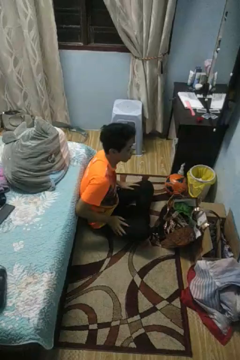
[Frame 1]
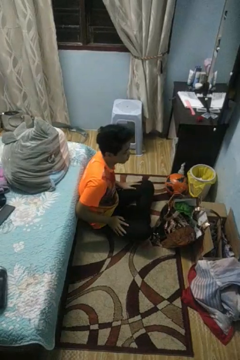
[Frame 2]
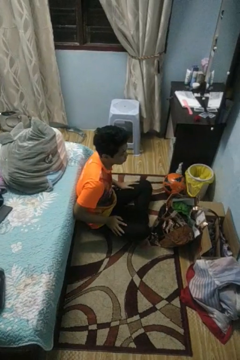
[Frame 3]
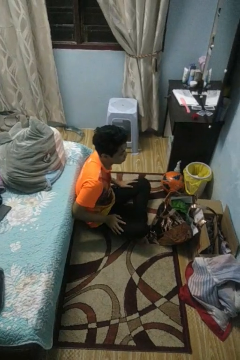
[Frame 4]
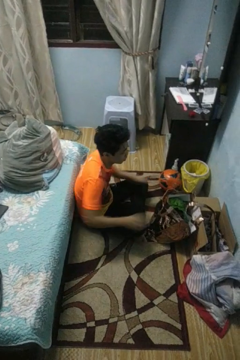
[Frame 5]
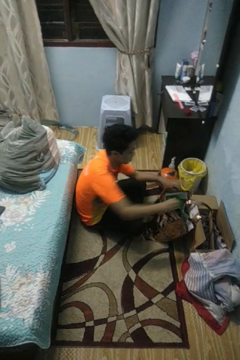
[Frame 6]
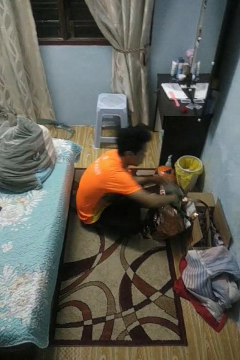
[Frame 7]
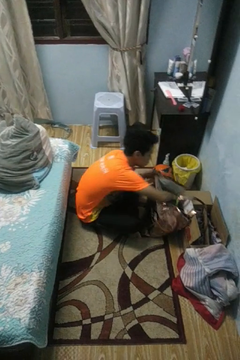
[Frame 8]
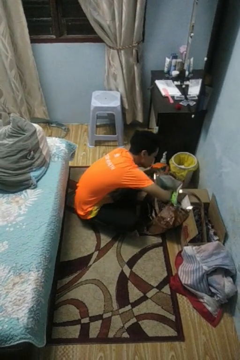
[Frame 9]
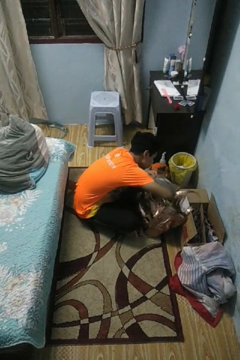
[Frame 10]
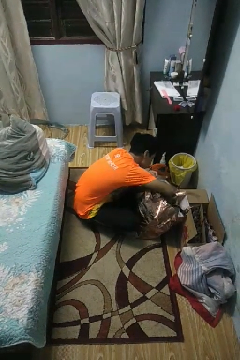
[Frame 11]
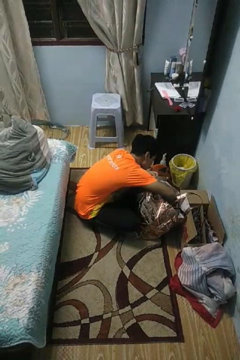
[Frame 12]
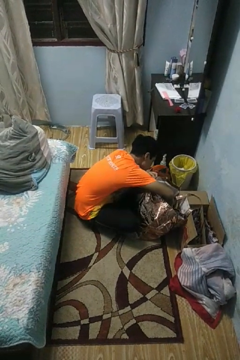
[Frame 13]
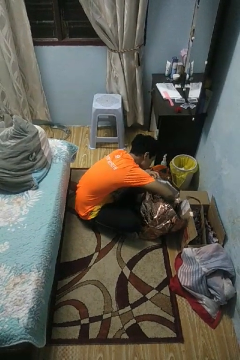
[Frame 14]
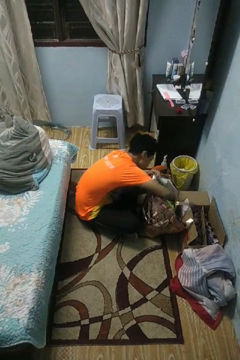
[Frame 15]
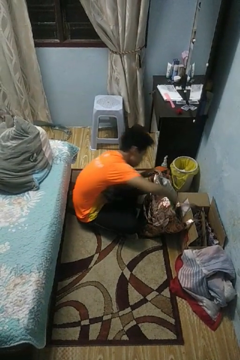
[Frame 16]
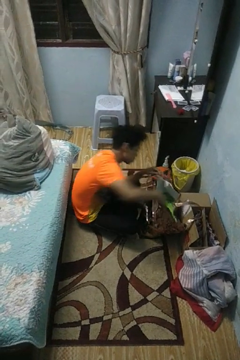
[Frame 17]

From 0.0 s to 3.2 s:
person searches in bag

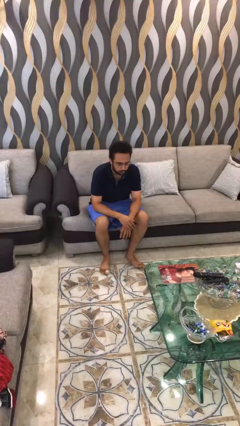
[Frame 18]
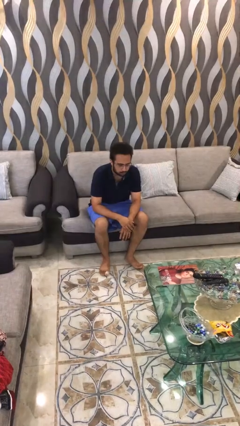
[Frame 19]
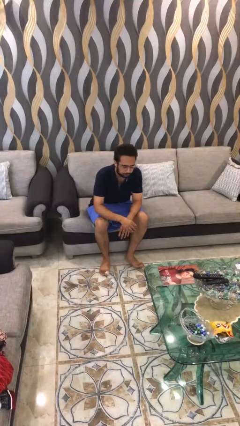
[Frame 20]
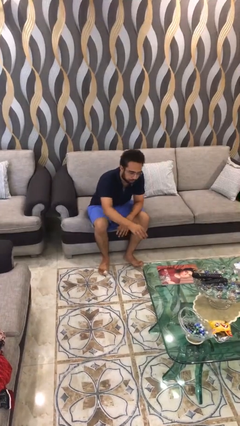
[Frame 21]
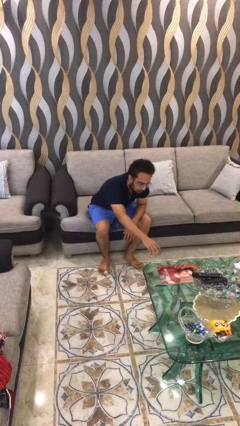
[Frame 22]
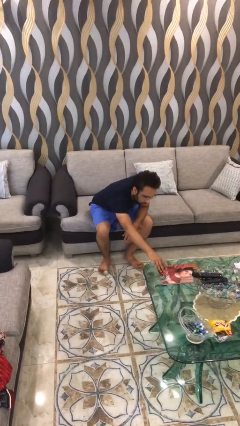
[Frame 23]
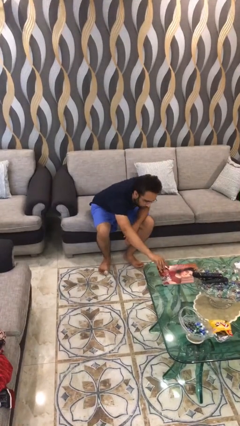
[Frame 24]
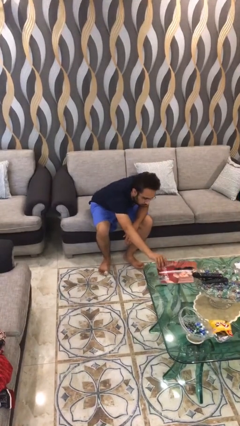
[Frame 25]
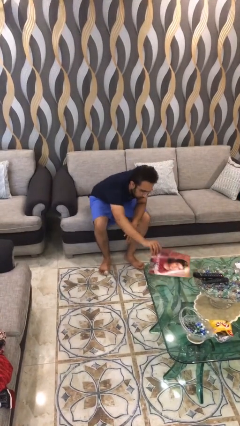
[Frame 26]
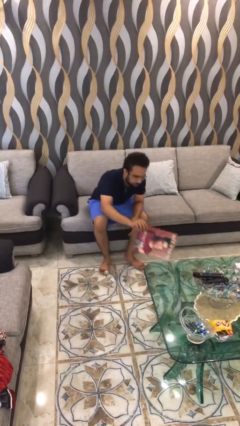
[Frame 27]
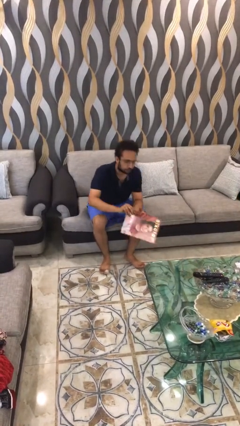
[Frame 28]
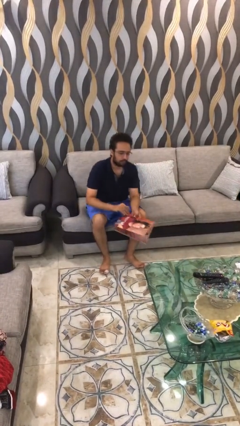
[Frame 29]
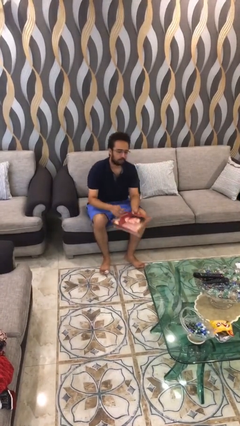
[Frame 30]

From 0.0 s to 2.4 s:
person picks up object from table

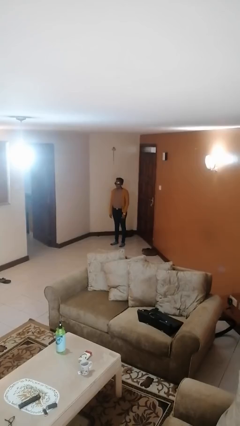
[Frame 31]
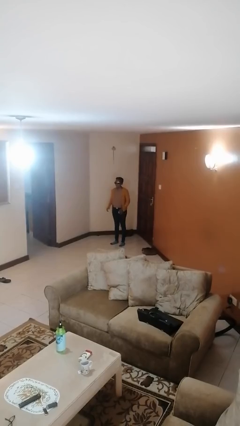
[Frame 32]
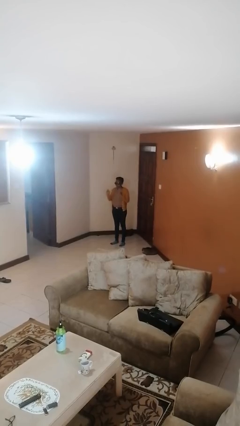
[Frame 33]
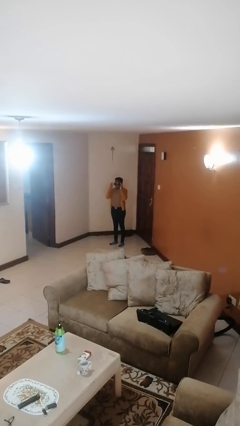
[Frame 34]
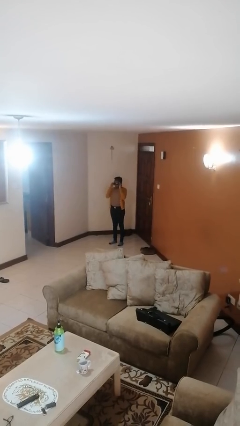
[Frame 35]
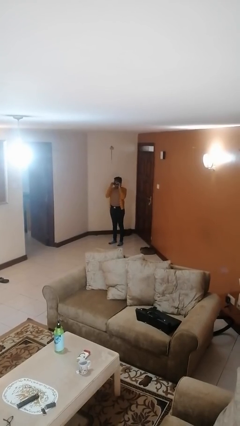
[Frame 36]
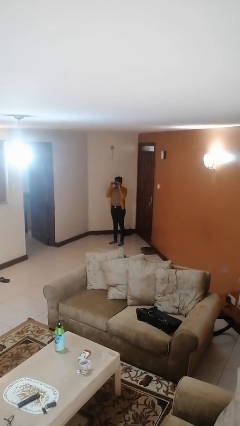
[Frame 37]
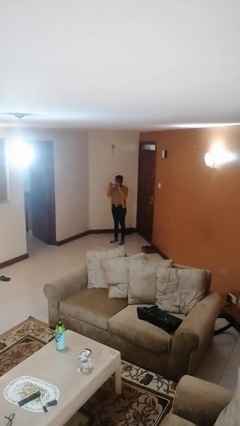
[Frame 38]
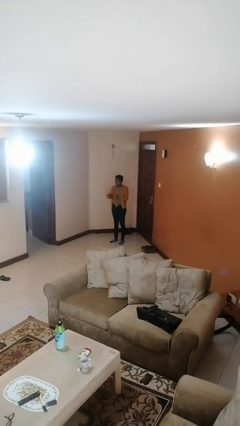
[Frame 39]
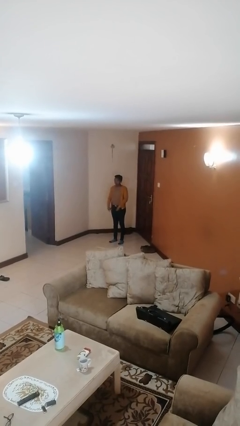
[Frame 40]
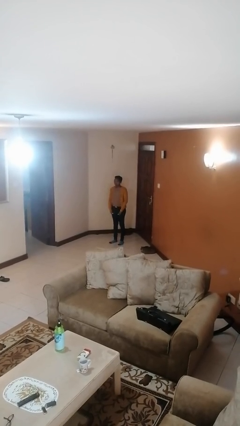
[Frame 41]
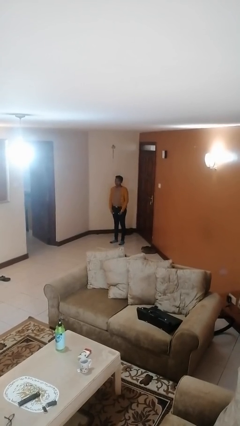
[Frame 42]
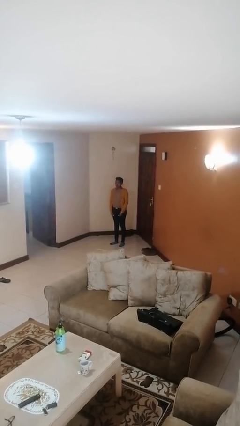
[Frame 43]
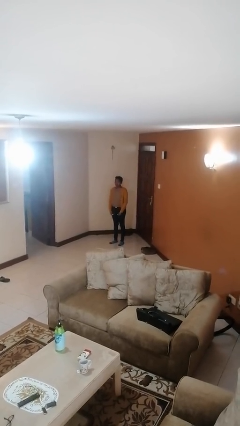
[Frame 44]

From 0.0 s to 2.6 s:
person takes off sunglasses

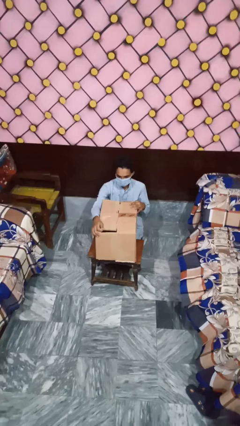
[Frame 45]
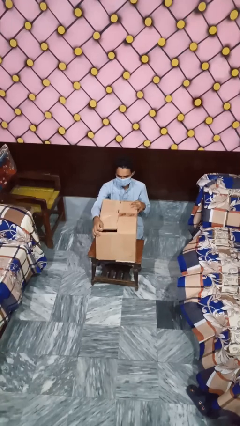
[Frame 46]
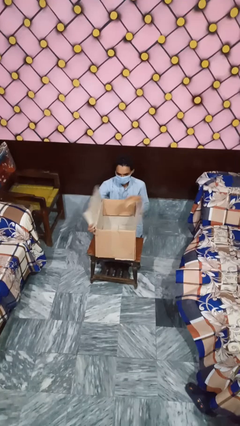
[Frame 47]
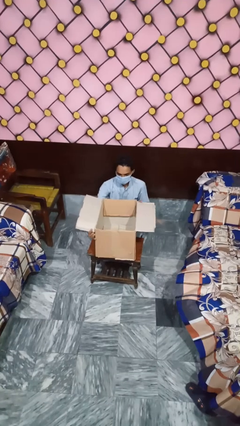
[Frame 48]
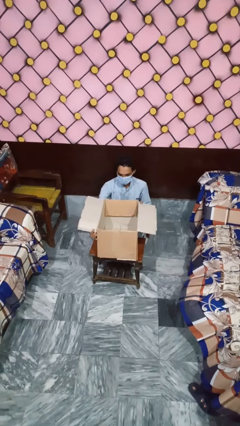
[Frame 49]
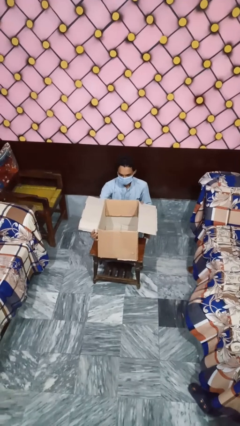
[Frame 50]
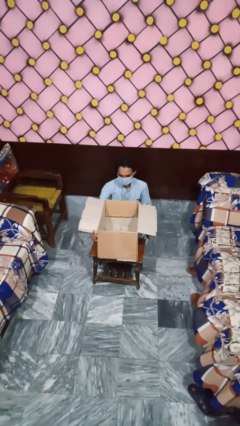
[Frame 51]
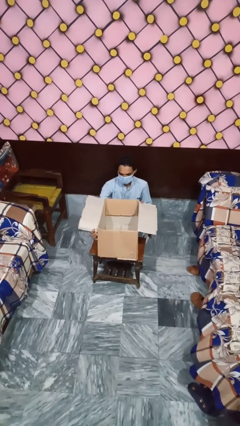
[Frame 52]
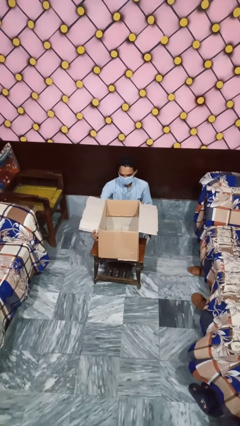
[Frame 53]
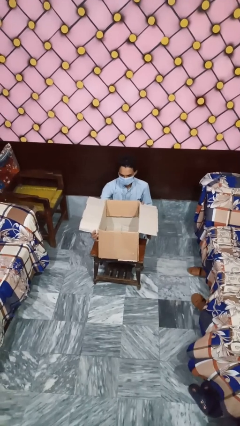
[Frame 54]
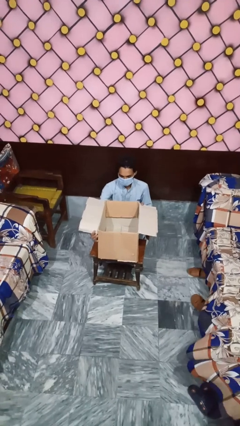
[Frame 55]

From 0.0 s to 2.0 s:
person opens box

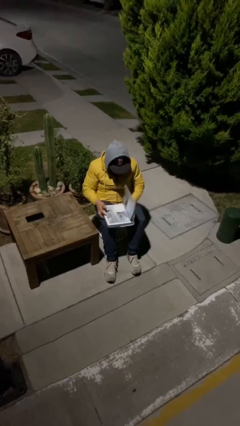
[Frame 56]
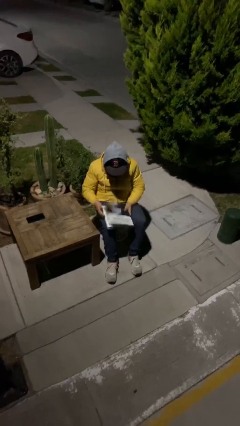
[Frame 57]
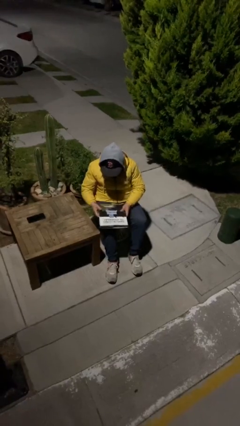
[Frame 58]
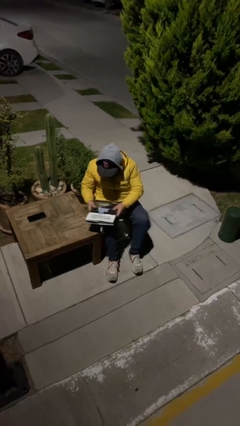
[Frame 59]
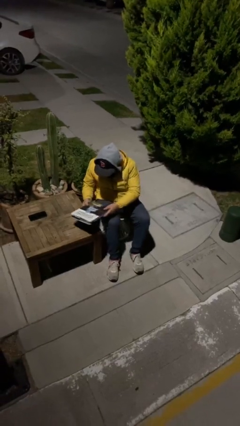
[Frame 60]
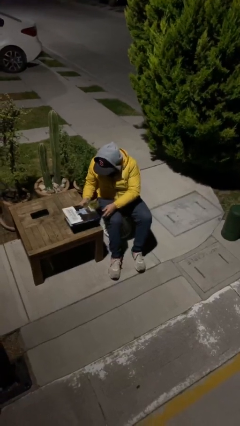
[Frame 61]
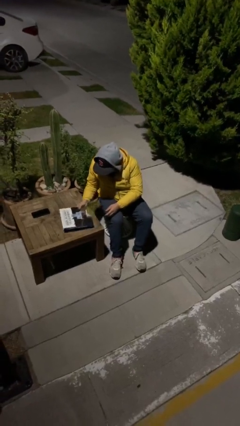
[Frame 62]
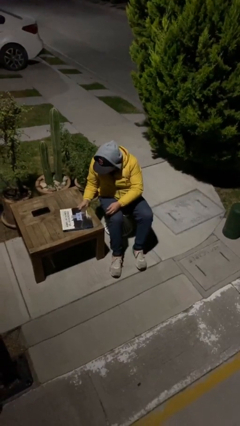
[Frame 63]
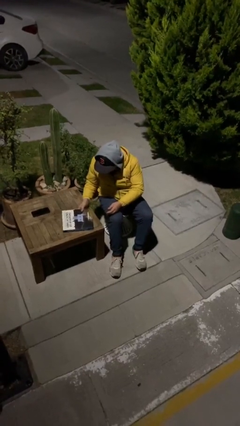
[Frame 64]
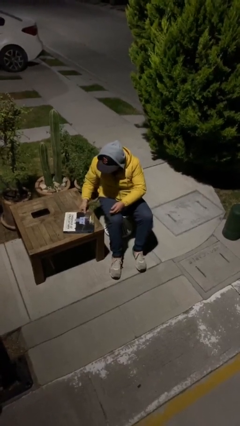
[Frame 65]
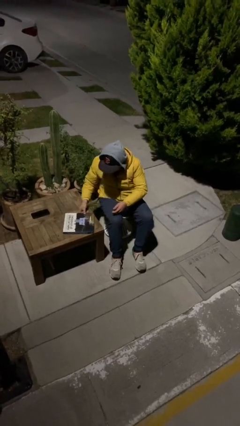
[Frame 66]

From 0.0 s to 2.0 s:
person puts down object on table

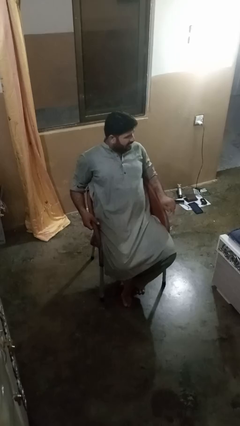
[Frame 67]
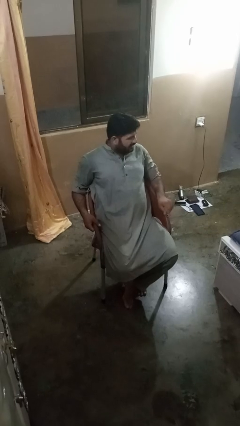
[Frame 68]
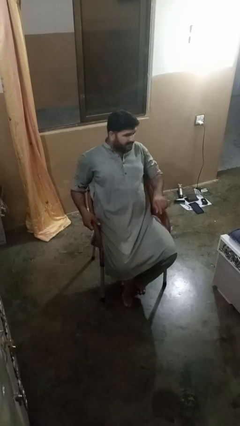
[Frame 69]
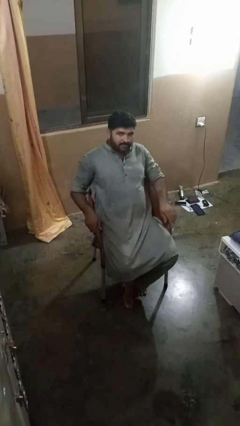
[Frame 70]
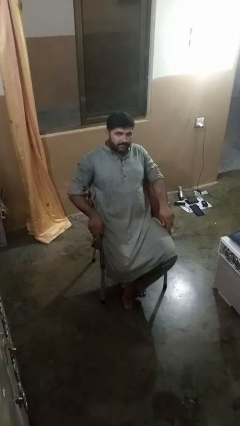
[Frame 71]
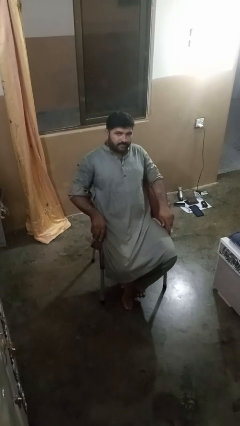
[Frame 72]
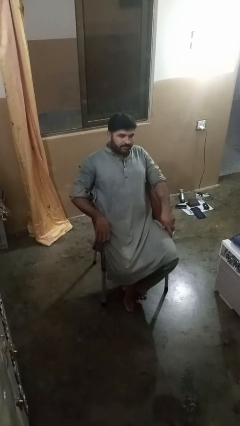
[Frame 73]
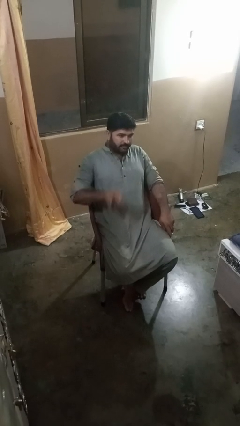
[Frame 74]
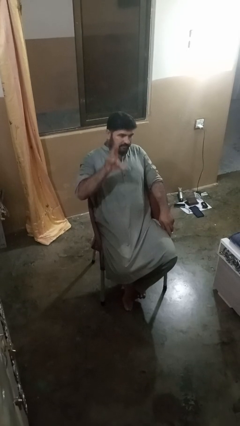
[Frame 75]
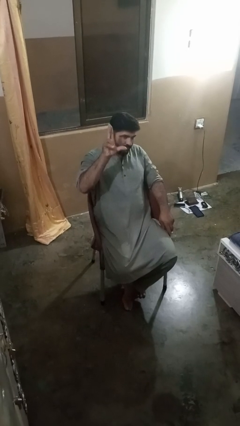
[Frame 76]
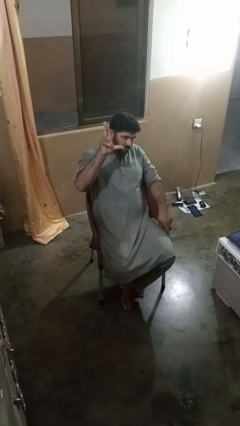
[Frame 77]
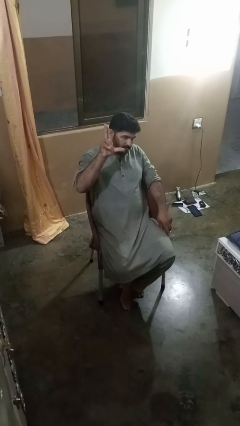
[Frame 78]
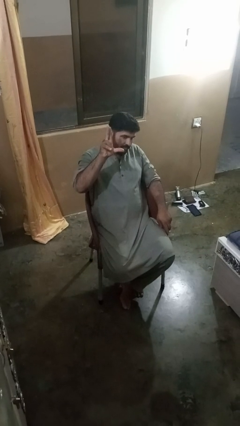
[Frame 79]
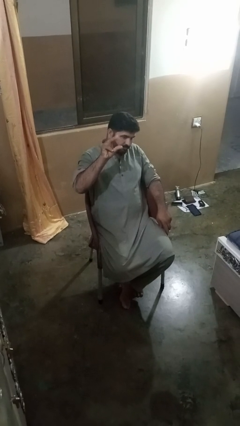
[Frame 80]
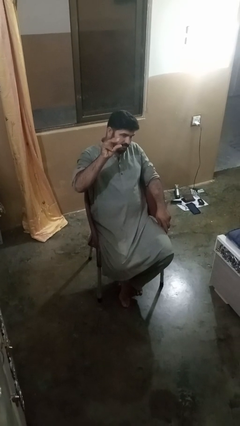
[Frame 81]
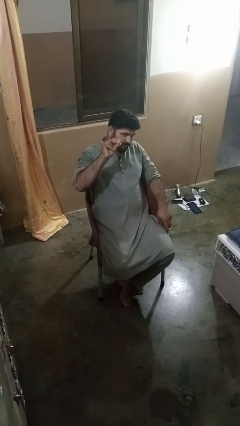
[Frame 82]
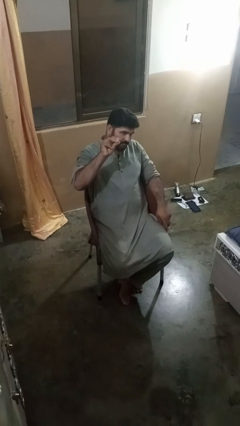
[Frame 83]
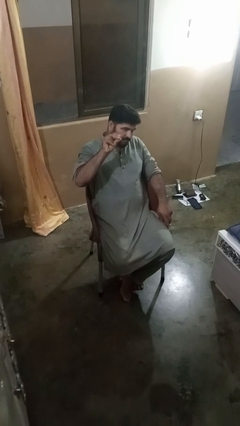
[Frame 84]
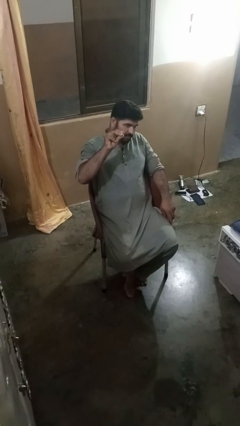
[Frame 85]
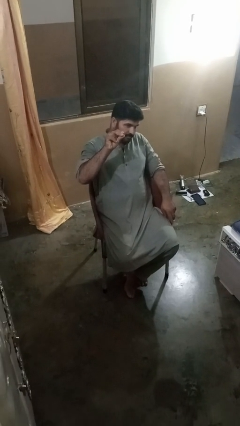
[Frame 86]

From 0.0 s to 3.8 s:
person gestures zoom in

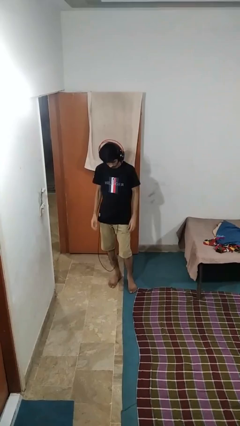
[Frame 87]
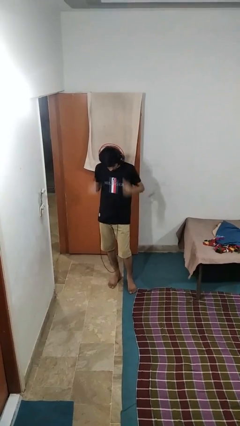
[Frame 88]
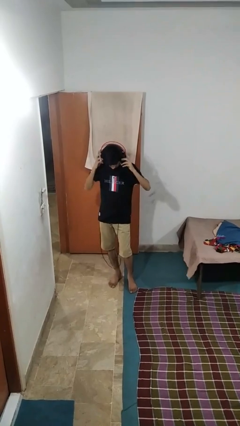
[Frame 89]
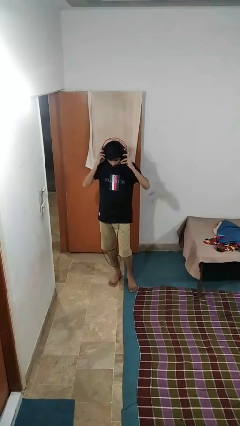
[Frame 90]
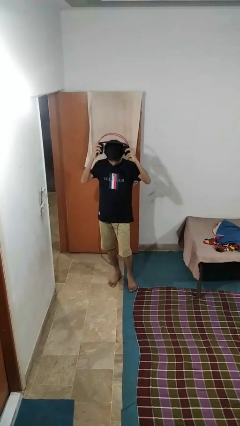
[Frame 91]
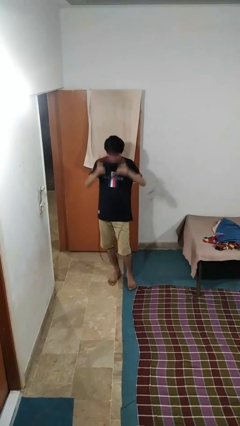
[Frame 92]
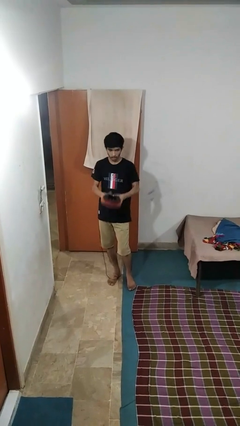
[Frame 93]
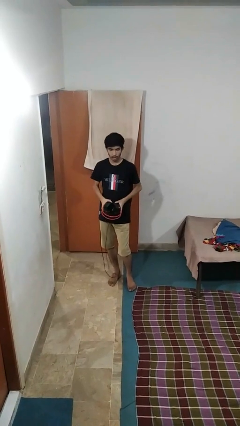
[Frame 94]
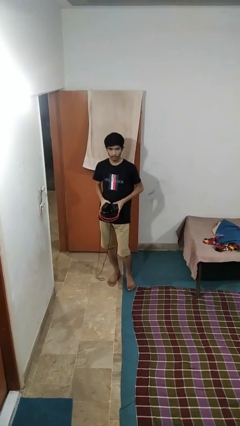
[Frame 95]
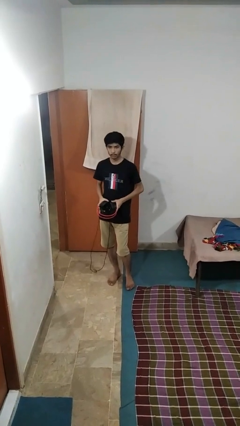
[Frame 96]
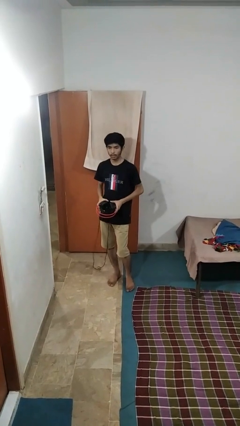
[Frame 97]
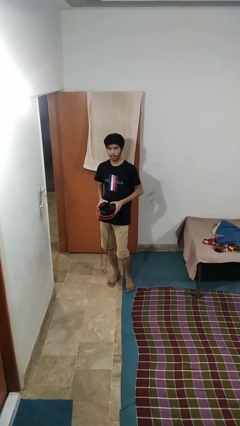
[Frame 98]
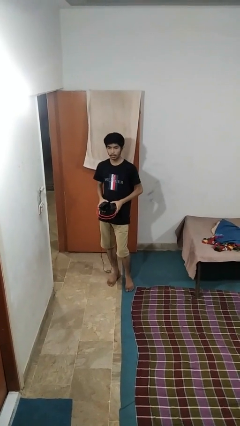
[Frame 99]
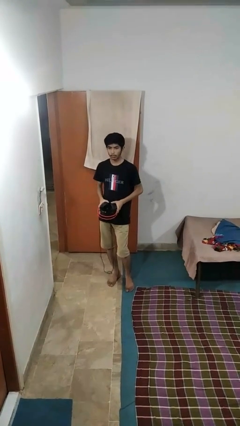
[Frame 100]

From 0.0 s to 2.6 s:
person takes off headphones
